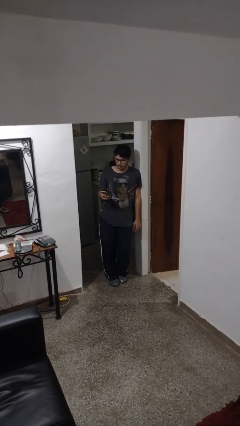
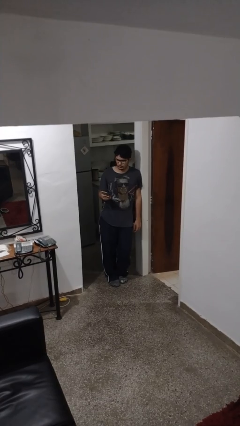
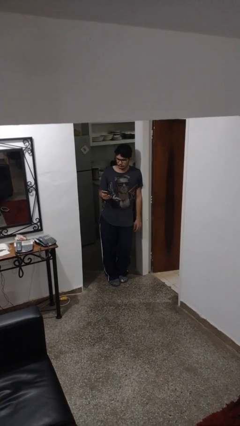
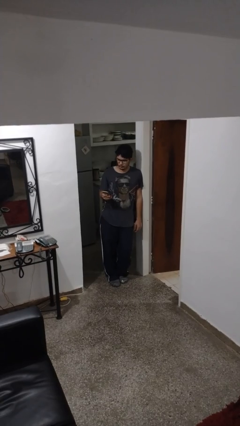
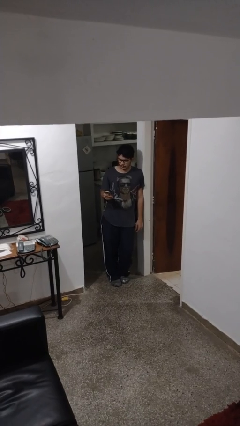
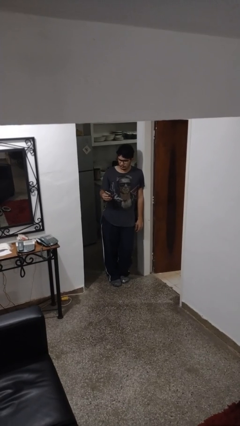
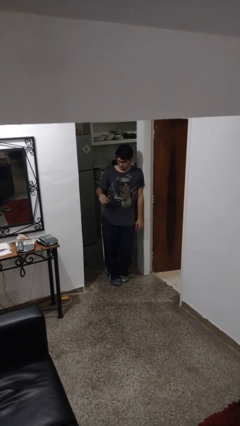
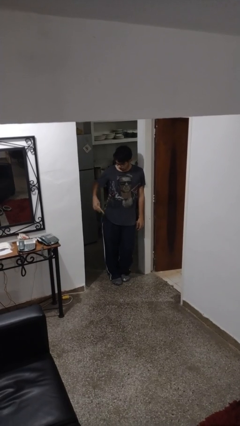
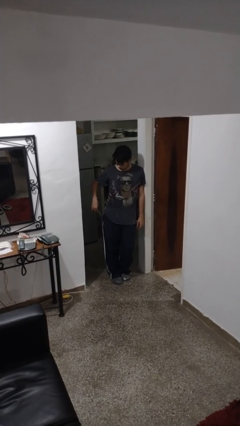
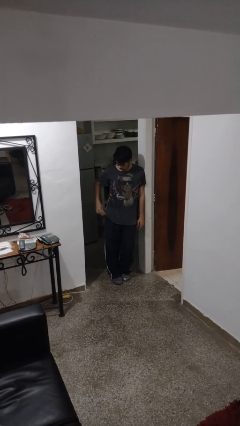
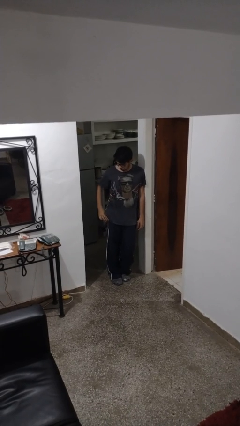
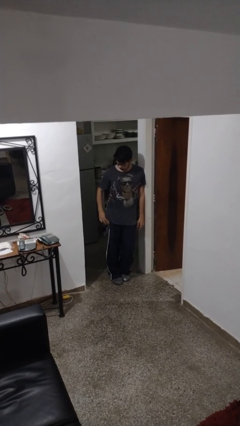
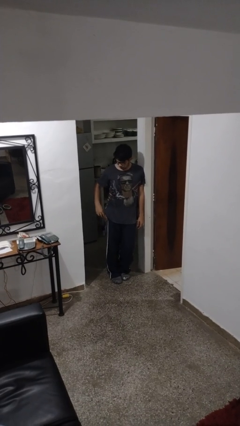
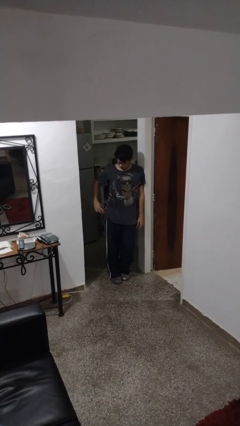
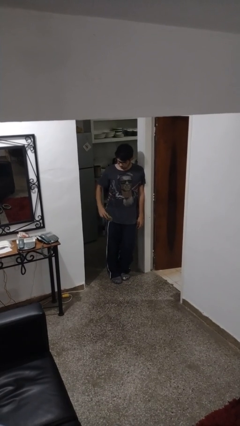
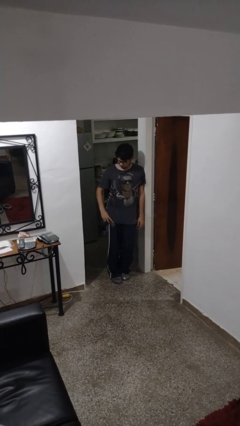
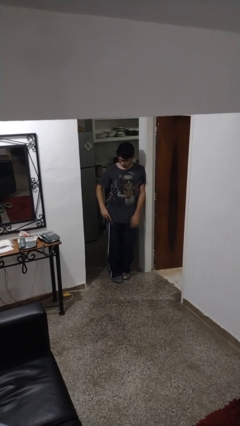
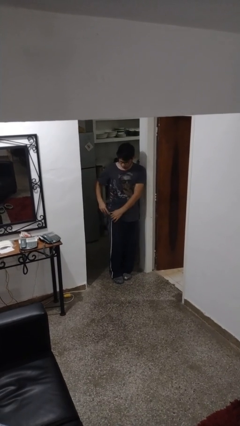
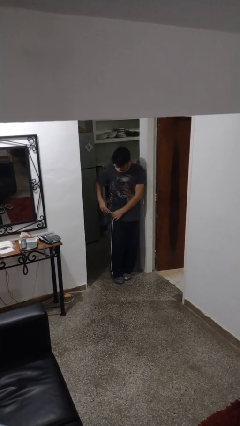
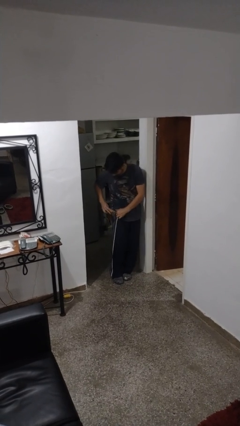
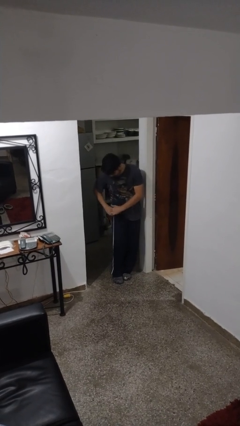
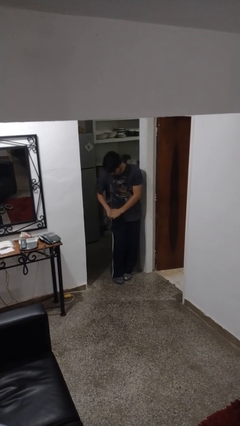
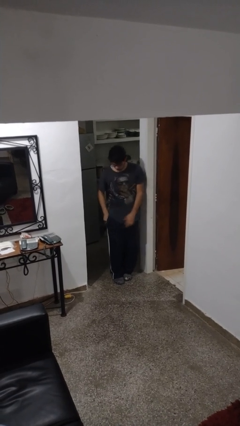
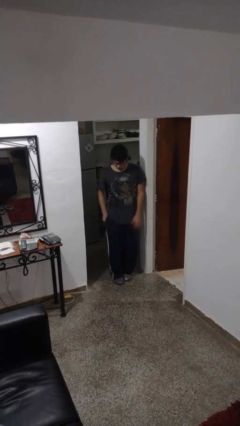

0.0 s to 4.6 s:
person puts phone into pocket

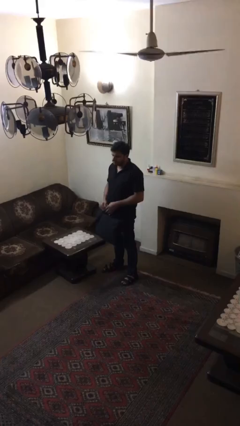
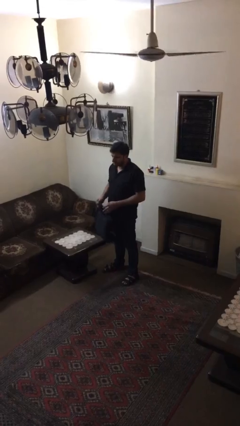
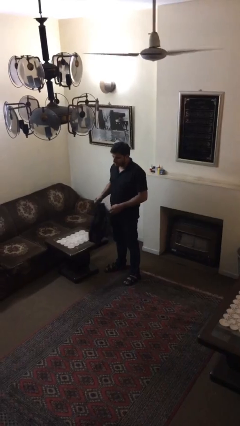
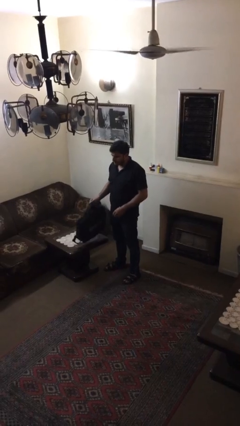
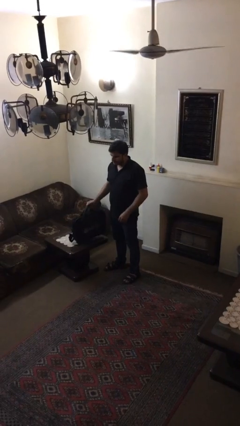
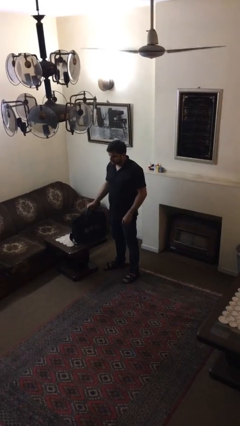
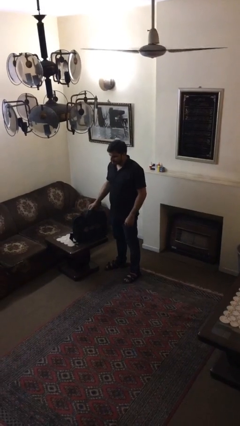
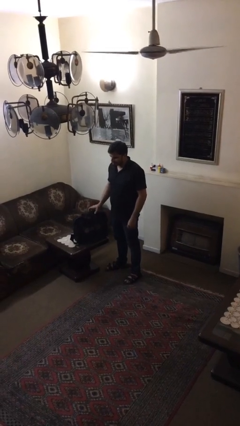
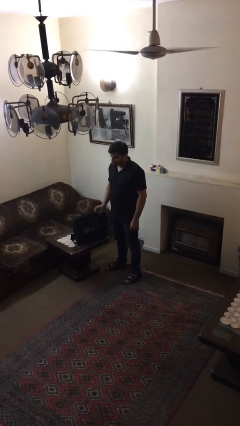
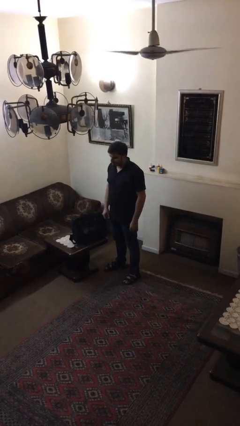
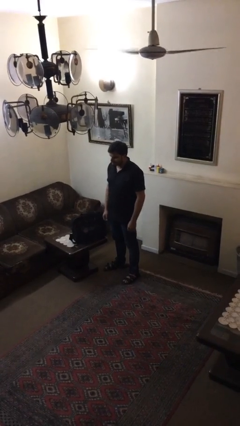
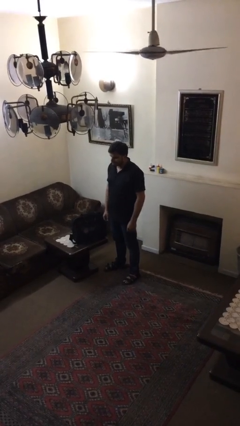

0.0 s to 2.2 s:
person puts down object on table

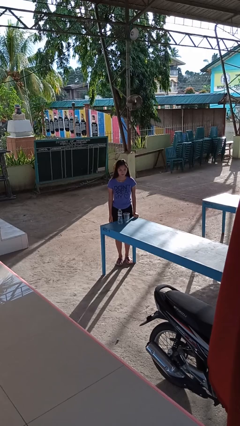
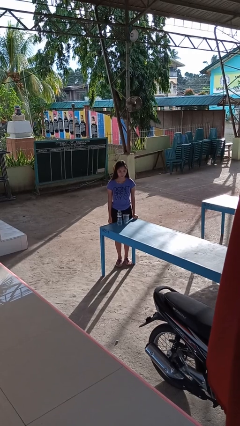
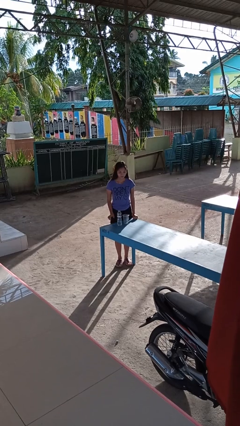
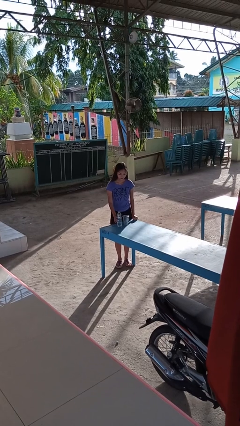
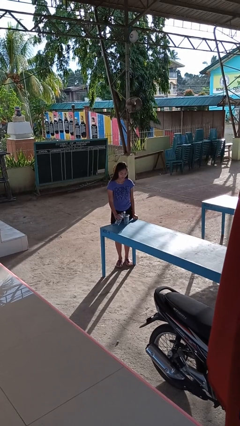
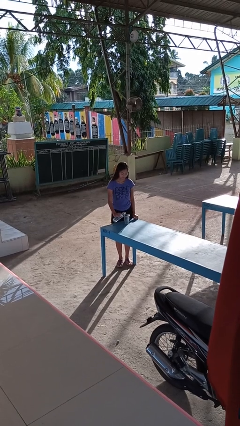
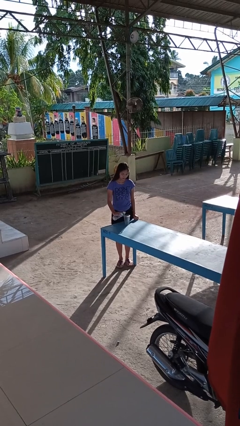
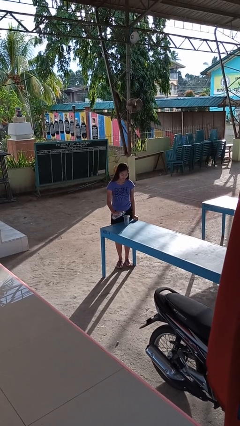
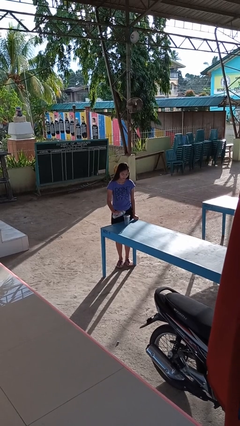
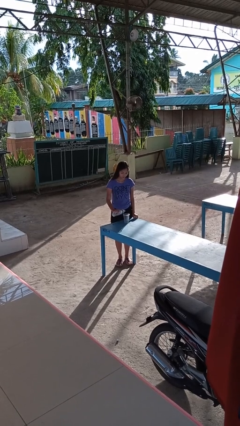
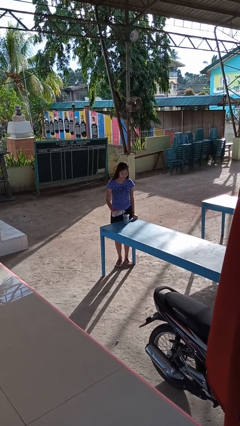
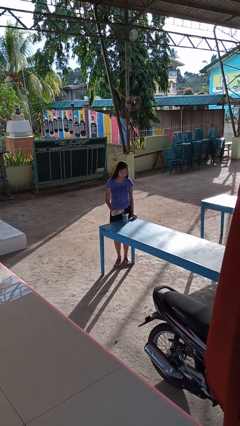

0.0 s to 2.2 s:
person pours liquid into cup

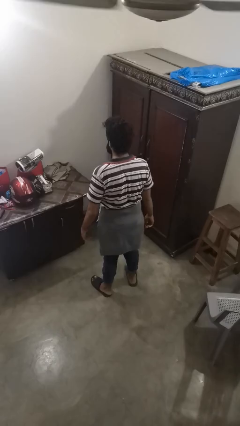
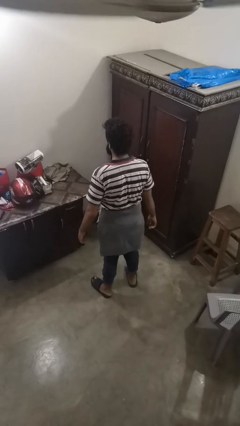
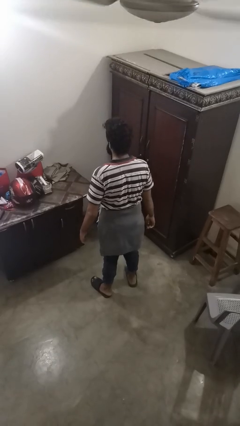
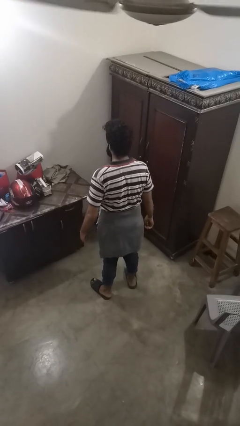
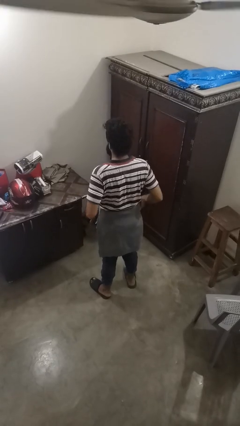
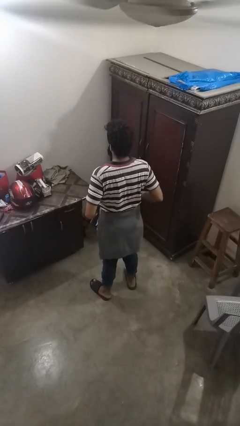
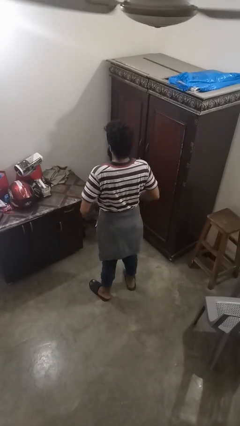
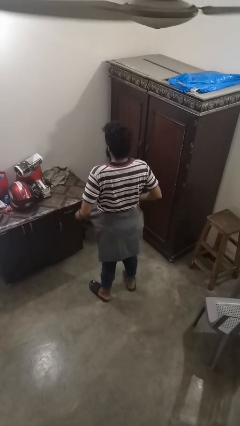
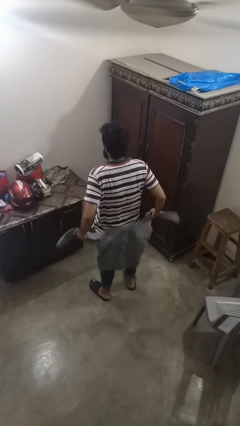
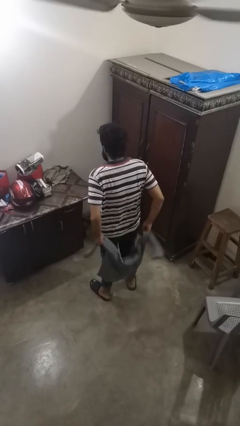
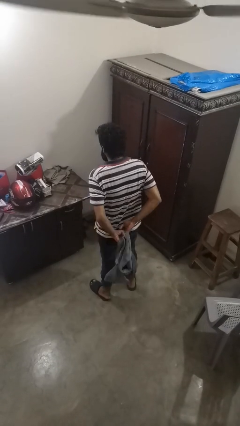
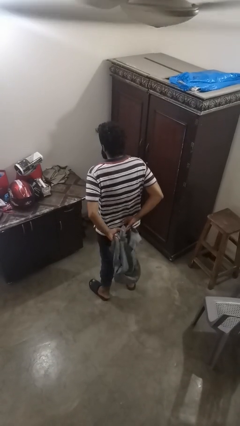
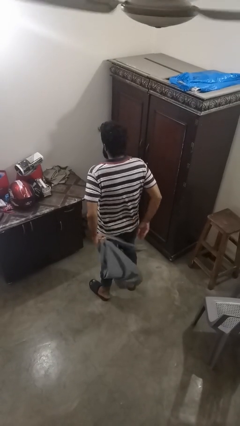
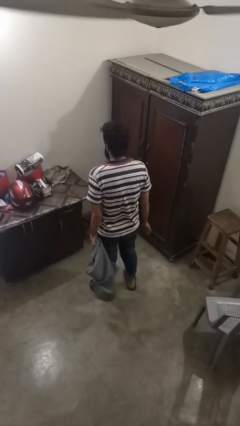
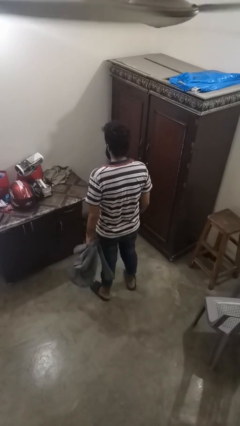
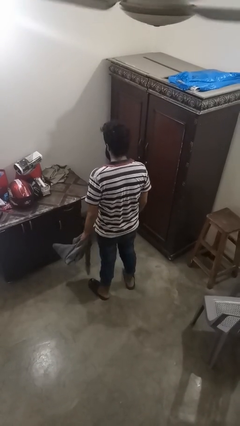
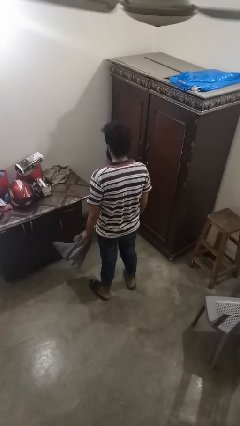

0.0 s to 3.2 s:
person unties jacket around waist

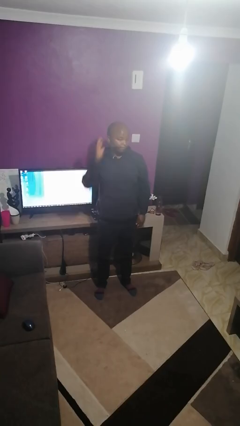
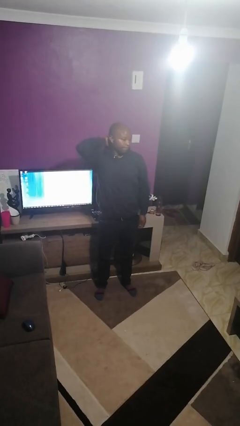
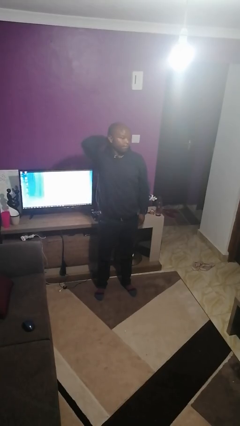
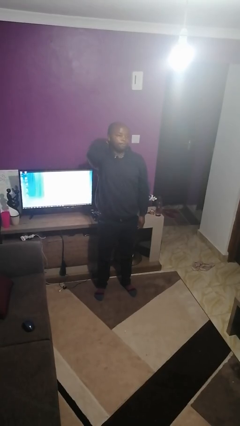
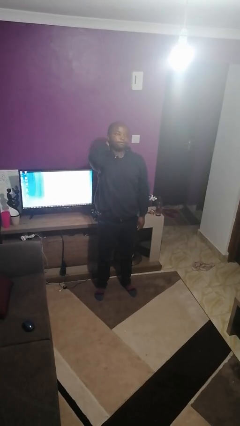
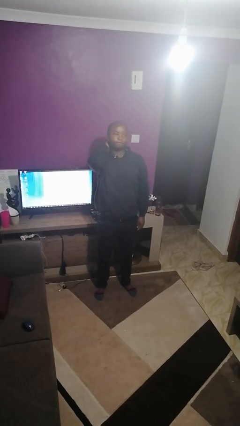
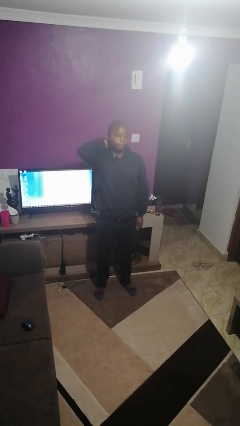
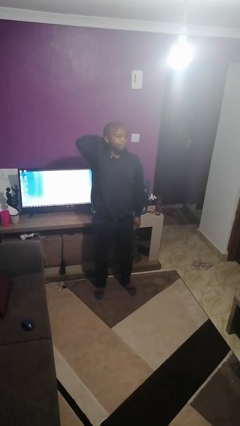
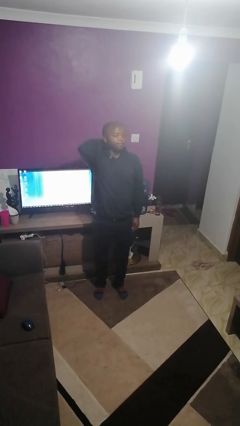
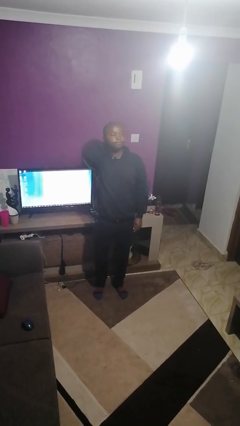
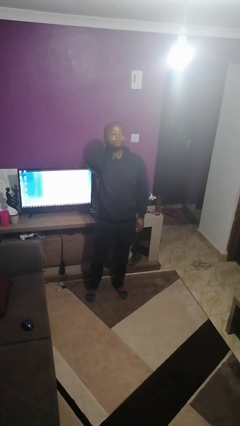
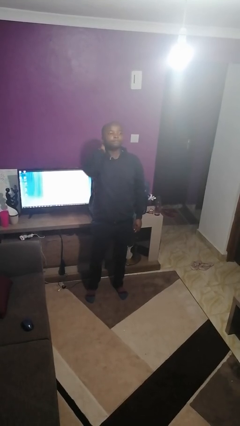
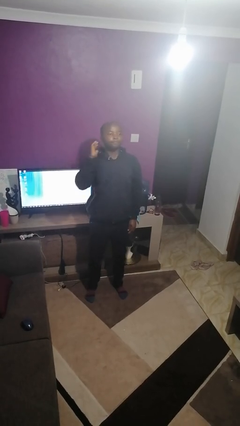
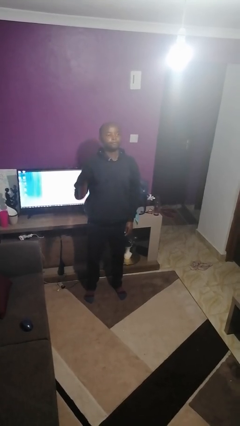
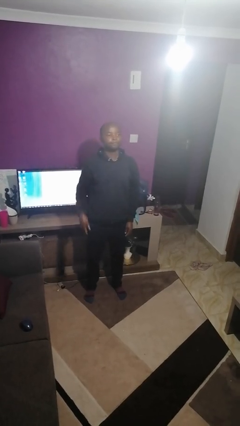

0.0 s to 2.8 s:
person rubs neck

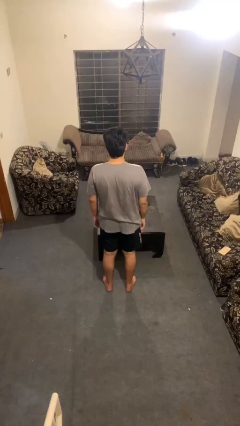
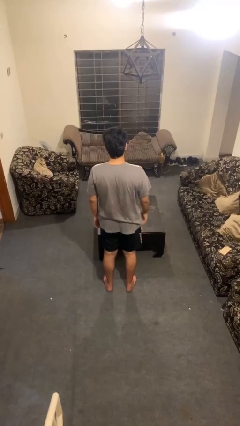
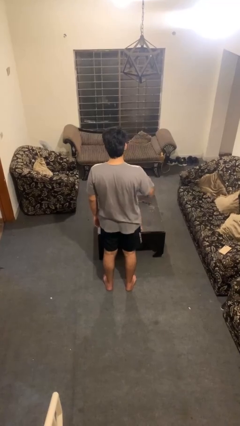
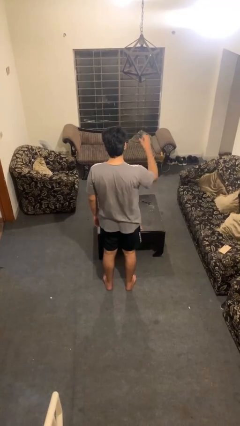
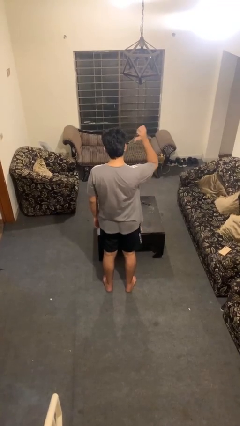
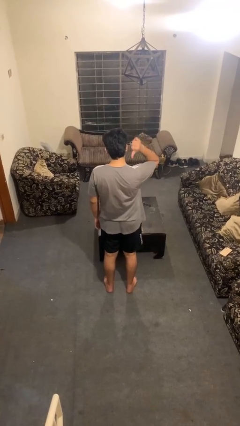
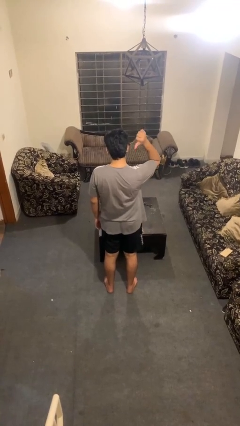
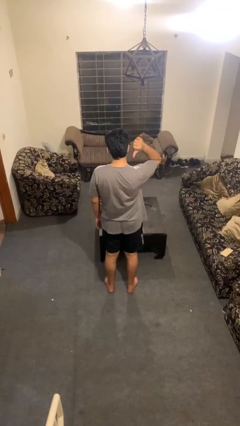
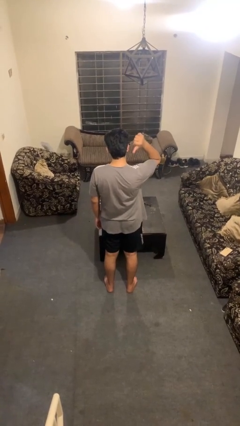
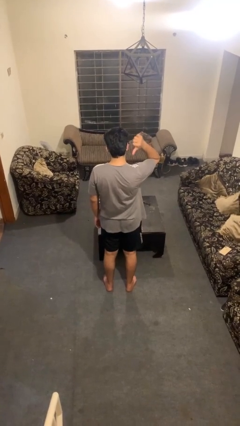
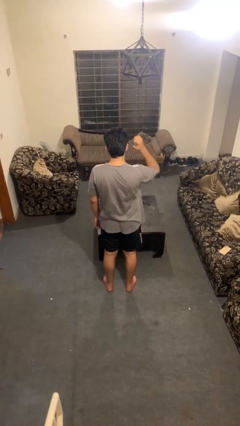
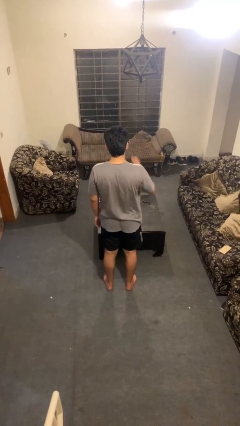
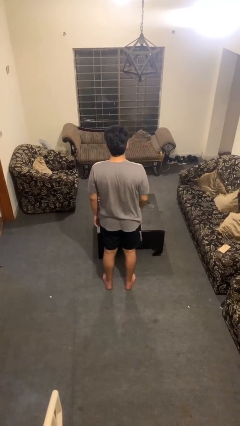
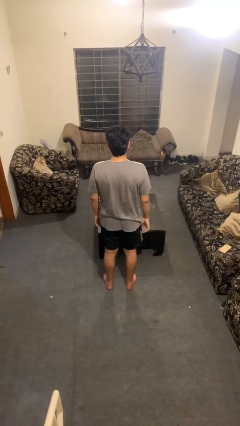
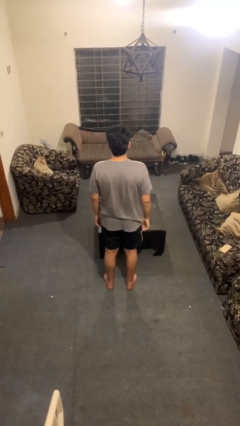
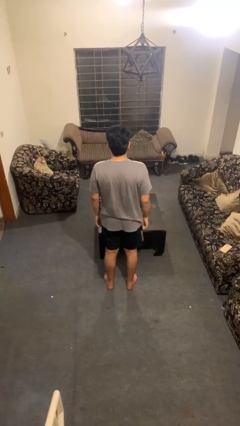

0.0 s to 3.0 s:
person gestures behind me
